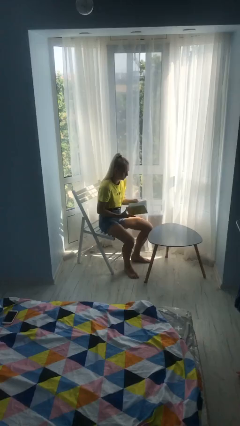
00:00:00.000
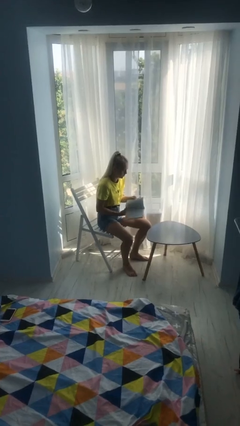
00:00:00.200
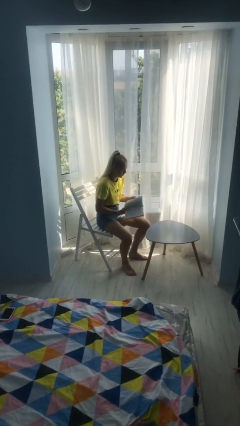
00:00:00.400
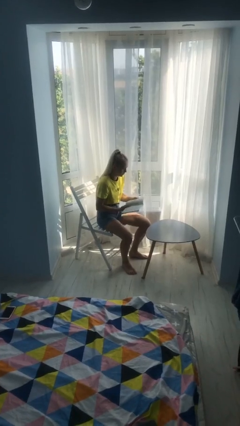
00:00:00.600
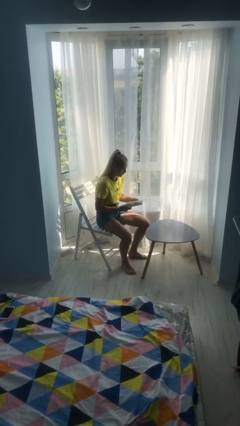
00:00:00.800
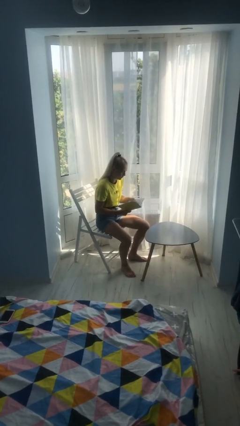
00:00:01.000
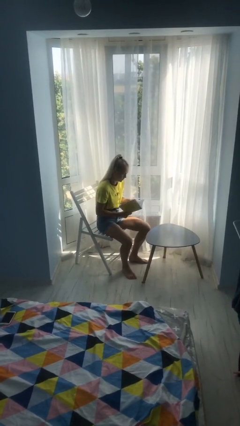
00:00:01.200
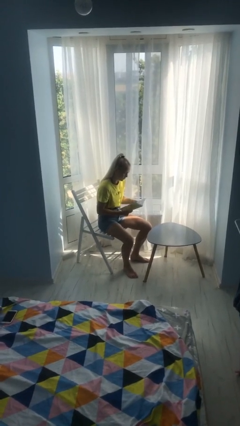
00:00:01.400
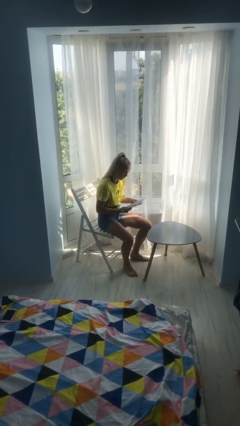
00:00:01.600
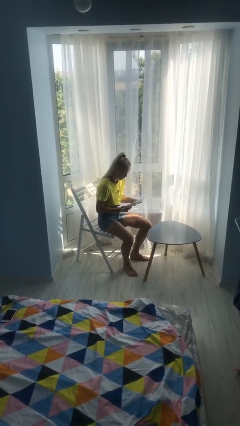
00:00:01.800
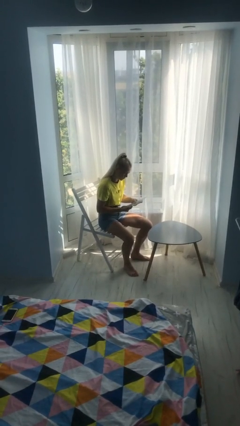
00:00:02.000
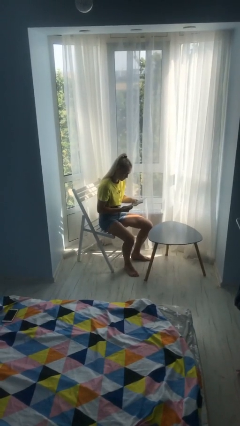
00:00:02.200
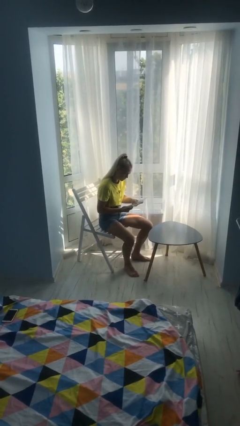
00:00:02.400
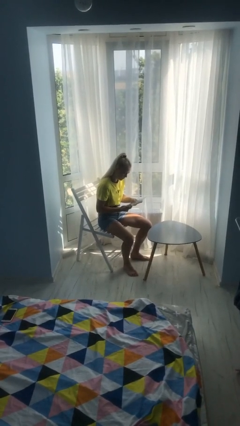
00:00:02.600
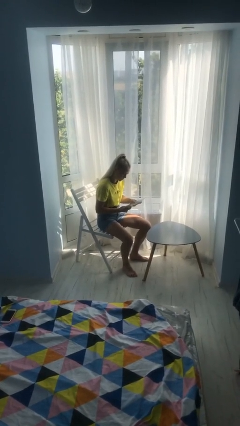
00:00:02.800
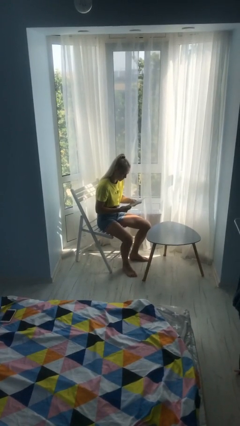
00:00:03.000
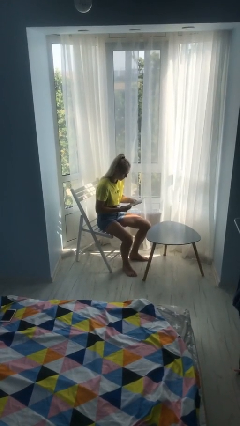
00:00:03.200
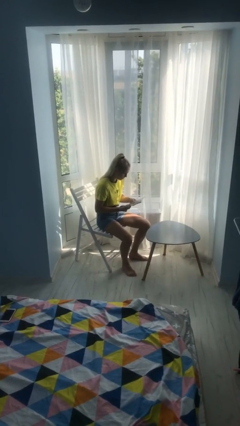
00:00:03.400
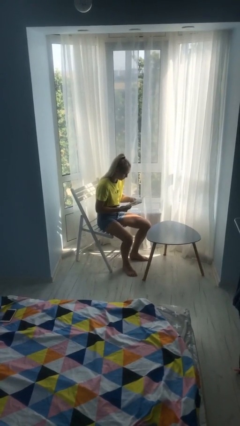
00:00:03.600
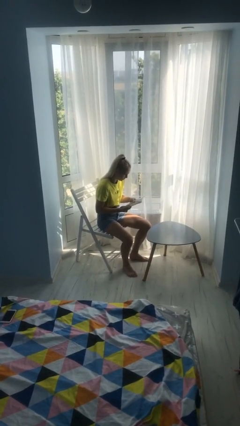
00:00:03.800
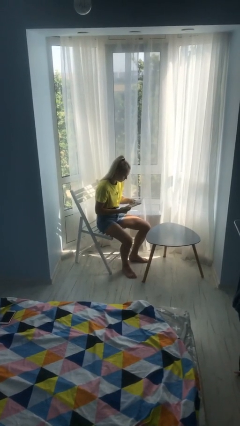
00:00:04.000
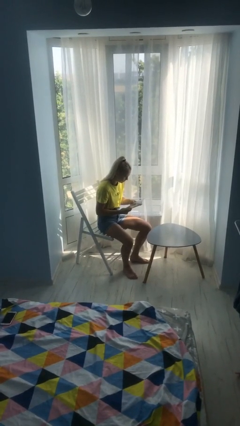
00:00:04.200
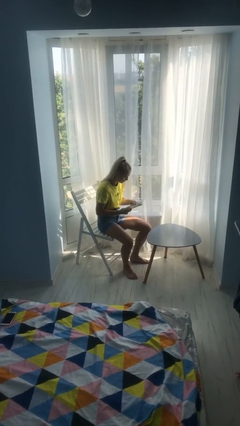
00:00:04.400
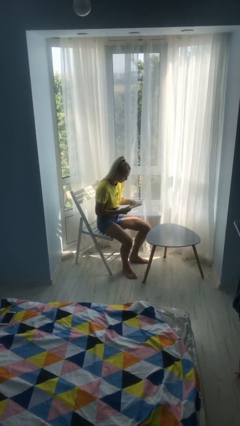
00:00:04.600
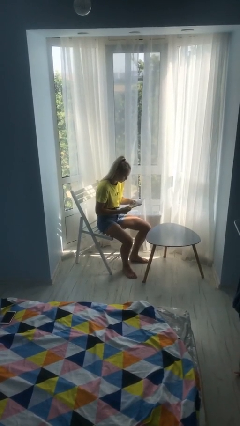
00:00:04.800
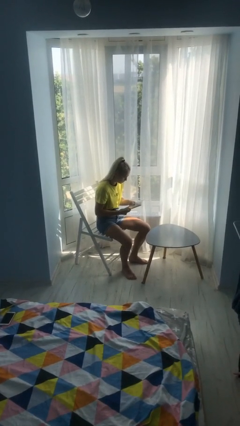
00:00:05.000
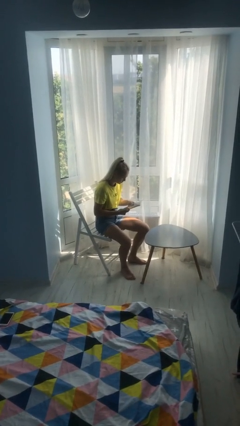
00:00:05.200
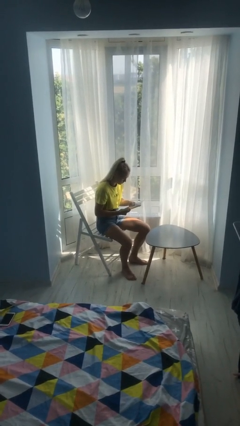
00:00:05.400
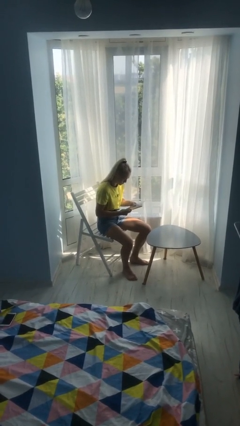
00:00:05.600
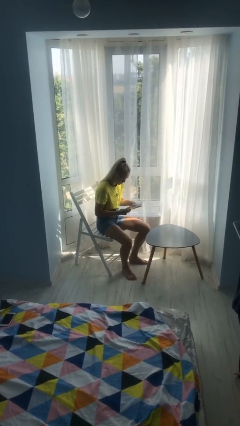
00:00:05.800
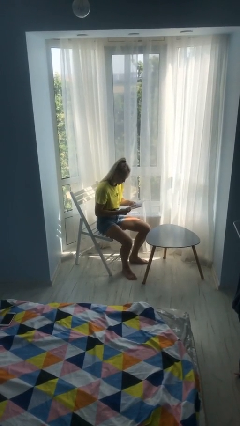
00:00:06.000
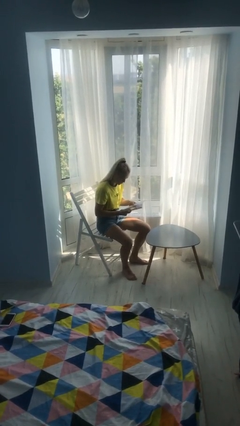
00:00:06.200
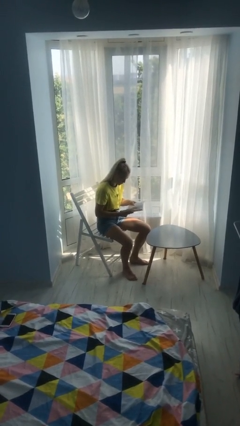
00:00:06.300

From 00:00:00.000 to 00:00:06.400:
person reads document

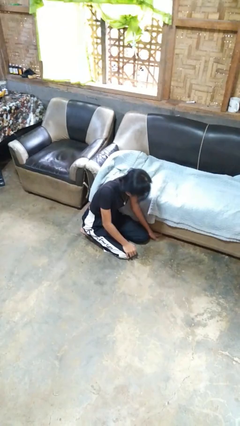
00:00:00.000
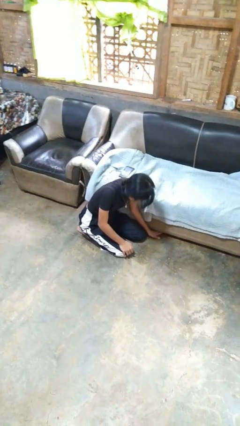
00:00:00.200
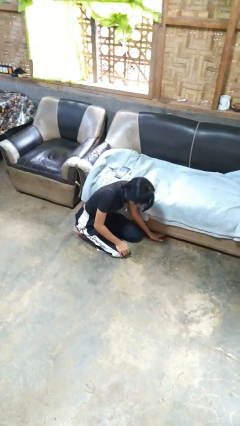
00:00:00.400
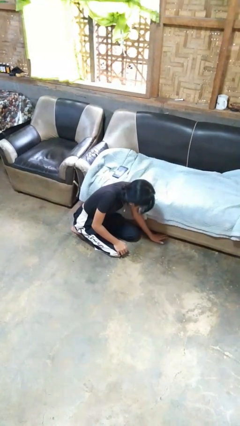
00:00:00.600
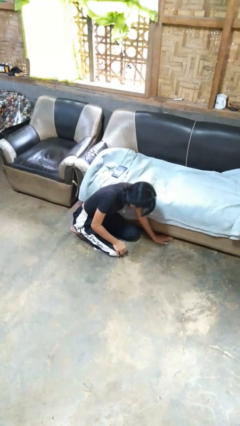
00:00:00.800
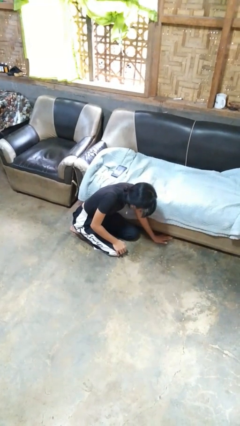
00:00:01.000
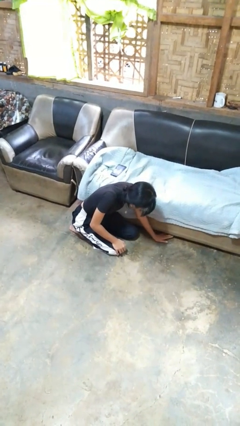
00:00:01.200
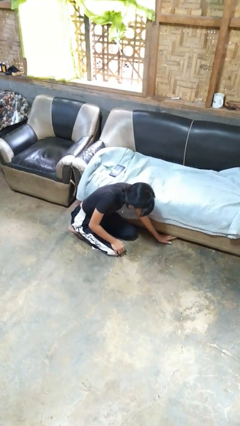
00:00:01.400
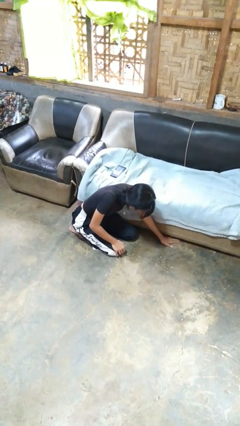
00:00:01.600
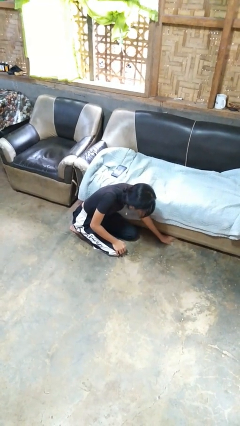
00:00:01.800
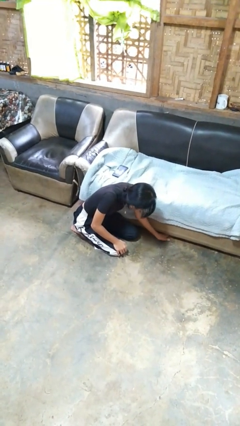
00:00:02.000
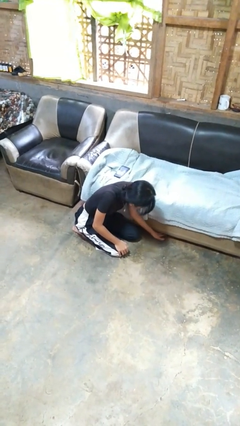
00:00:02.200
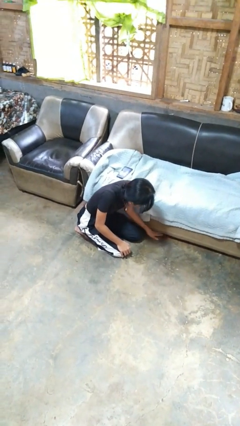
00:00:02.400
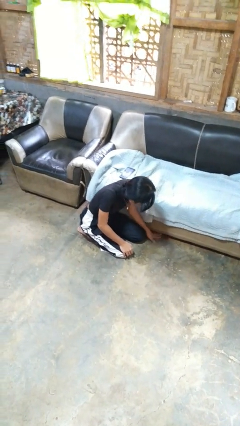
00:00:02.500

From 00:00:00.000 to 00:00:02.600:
person searches under couch

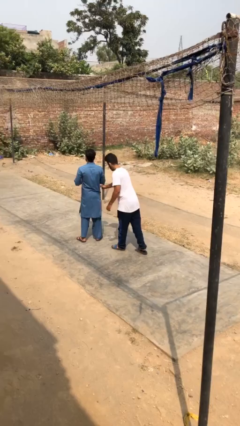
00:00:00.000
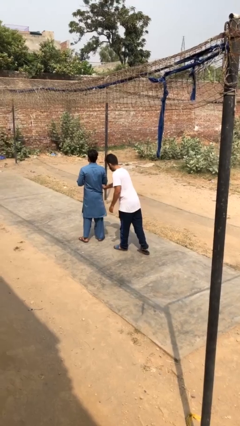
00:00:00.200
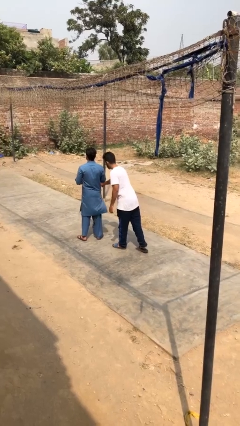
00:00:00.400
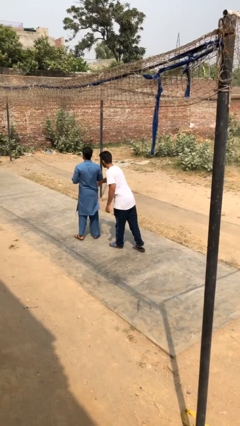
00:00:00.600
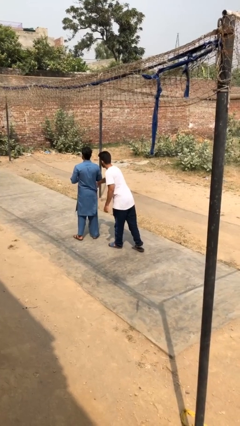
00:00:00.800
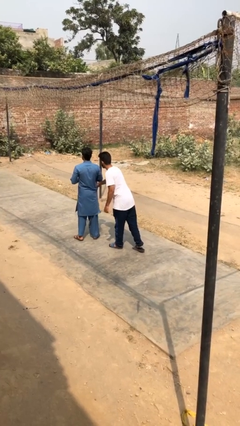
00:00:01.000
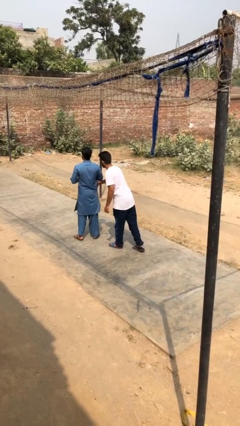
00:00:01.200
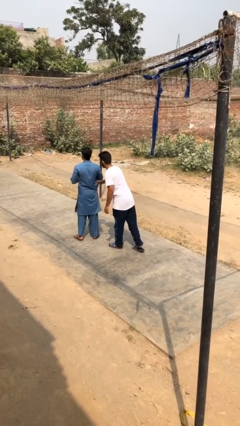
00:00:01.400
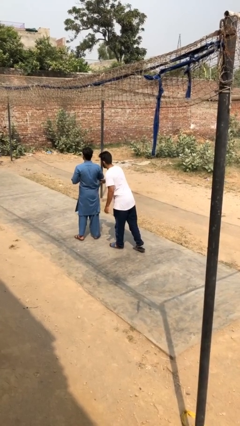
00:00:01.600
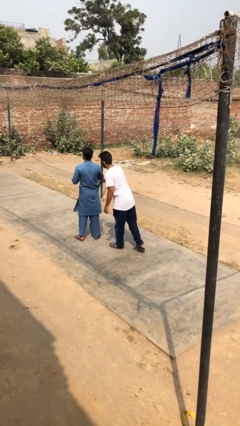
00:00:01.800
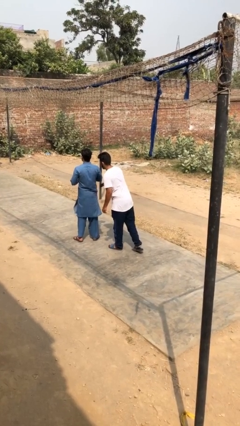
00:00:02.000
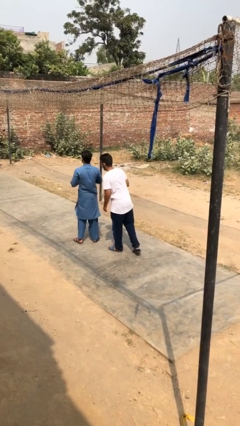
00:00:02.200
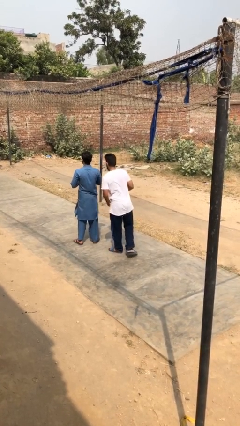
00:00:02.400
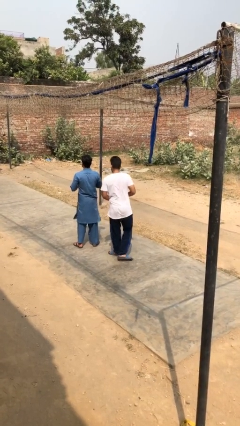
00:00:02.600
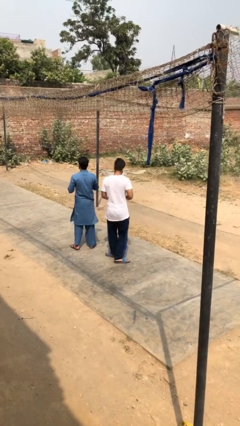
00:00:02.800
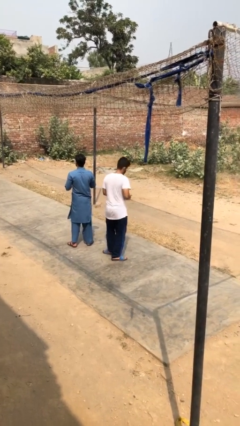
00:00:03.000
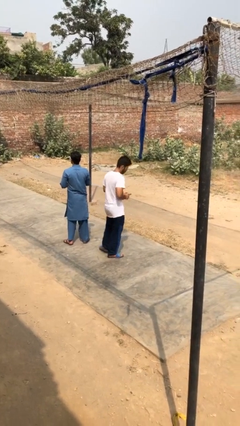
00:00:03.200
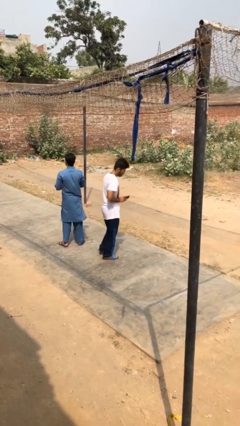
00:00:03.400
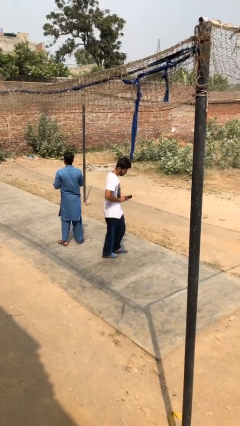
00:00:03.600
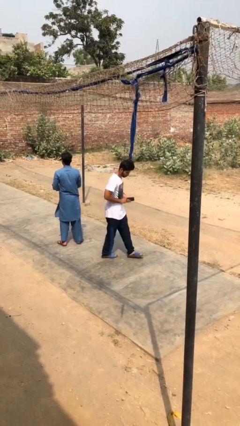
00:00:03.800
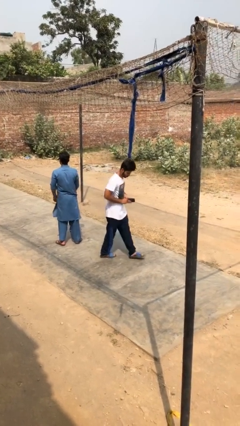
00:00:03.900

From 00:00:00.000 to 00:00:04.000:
person steals object from person

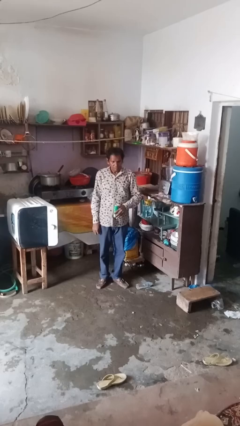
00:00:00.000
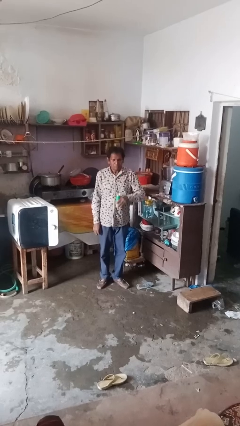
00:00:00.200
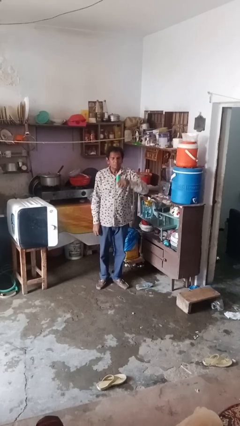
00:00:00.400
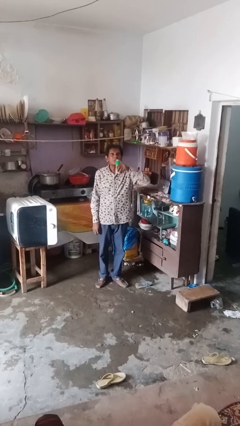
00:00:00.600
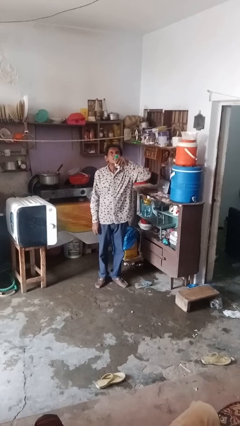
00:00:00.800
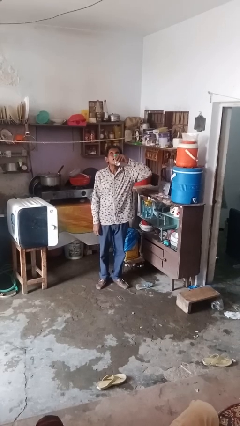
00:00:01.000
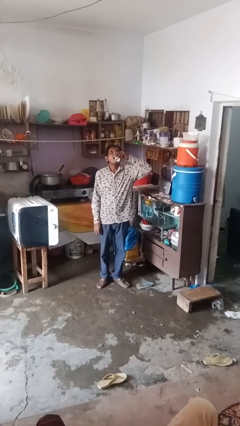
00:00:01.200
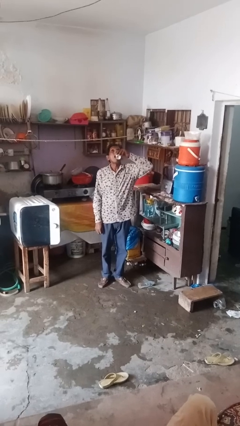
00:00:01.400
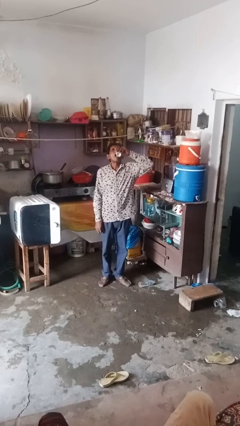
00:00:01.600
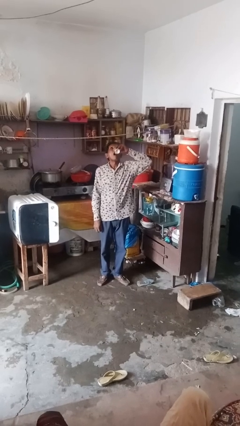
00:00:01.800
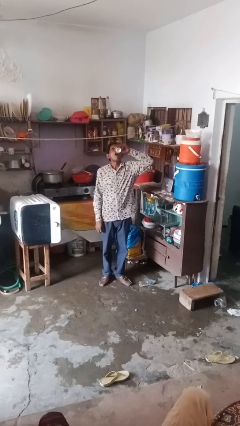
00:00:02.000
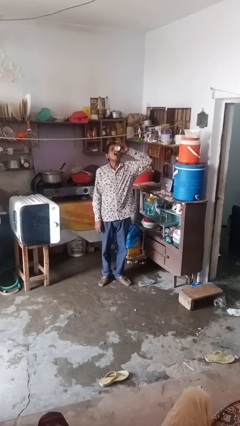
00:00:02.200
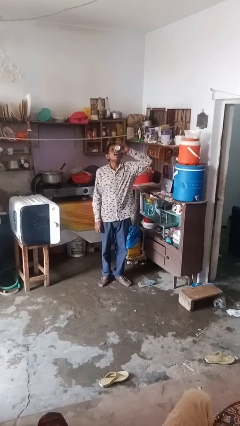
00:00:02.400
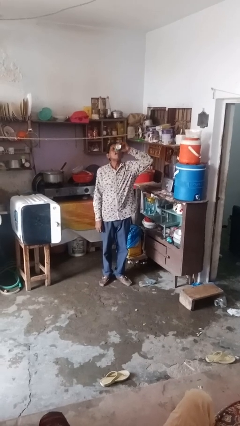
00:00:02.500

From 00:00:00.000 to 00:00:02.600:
person drinks from beverage can

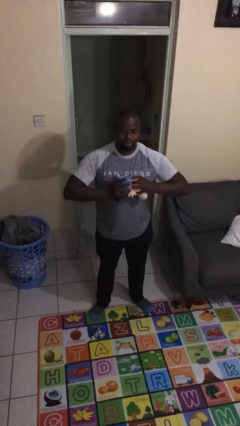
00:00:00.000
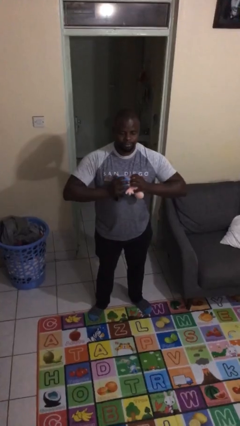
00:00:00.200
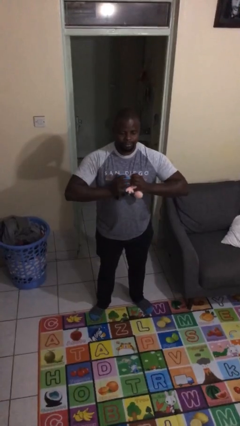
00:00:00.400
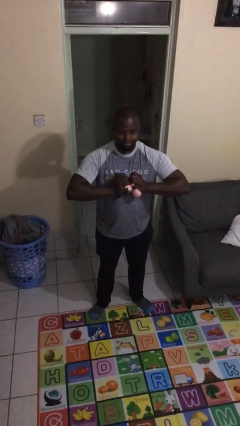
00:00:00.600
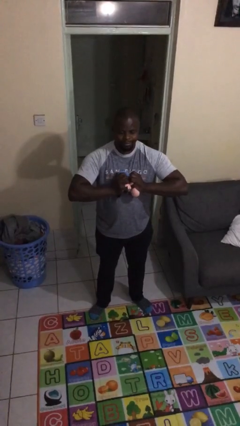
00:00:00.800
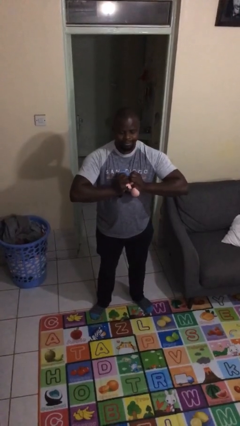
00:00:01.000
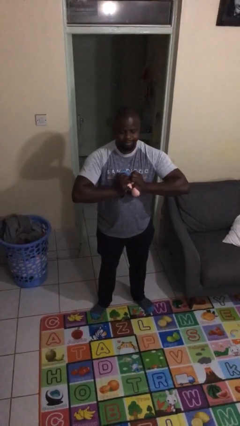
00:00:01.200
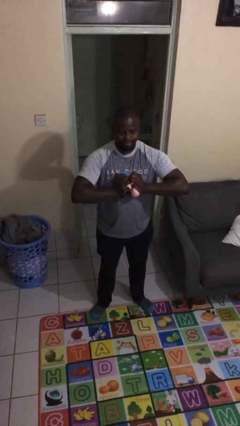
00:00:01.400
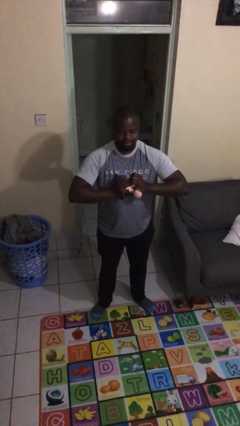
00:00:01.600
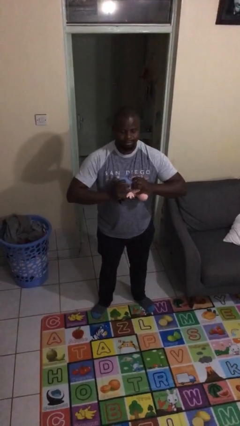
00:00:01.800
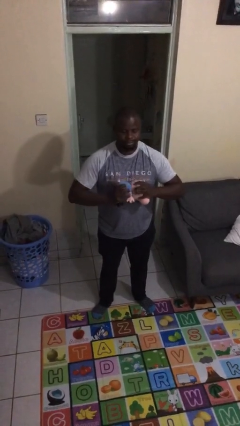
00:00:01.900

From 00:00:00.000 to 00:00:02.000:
person squeezes object
